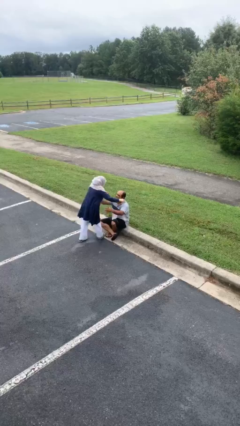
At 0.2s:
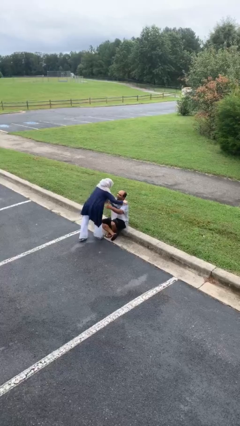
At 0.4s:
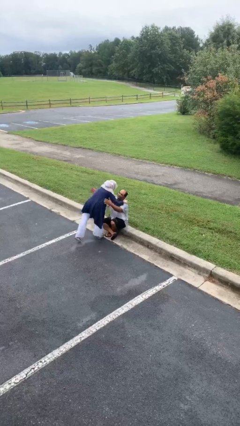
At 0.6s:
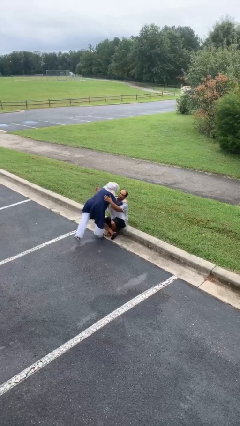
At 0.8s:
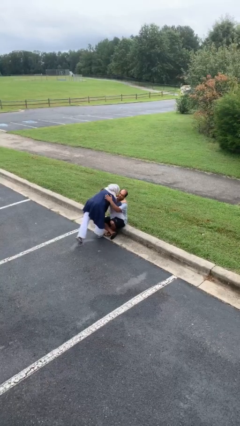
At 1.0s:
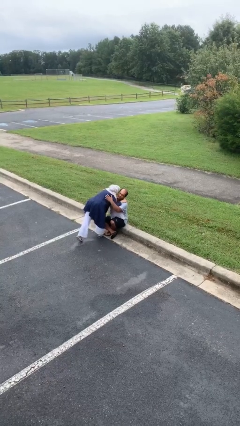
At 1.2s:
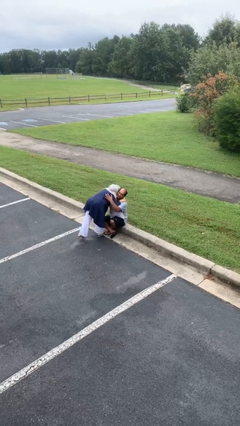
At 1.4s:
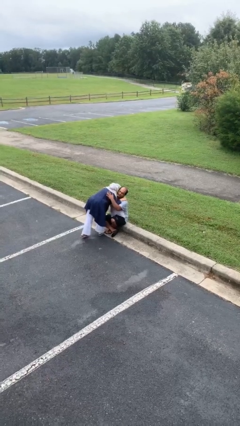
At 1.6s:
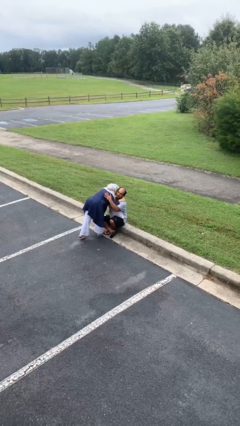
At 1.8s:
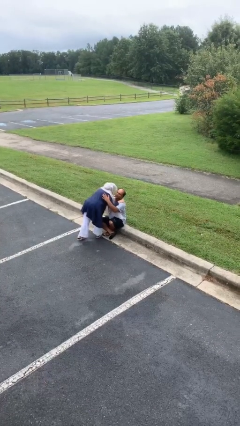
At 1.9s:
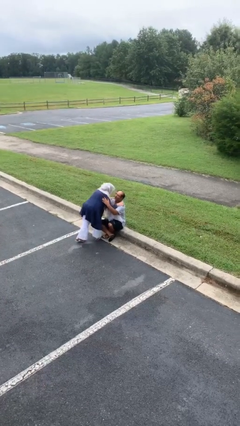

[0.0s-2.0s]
person embraces person

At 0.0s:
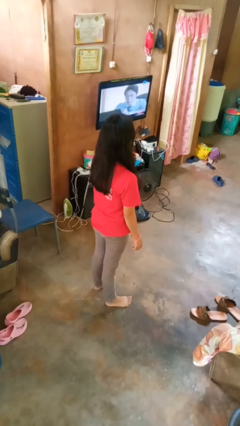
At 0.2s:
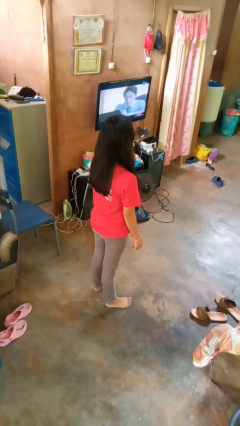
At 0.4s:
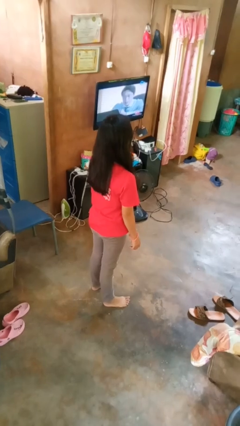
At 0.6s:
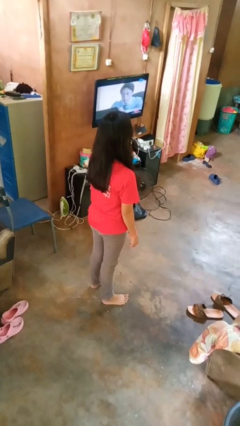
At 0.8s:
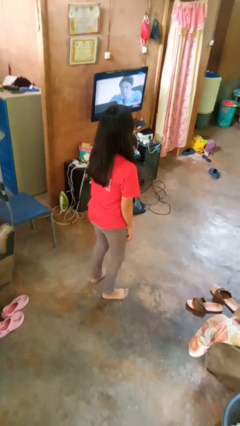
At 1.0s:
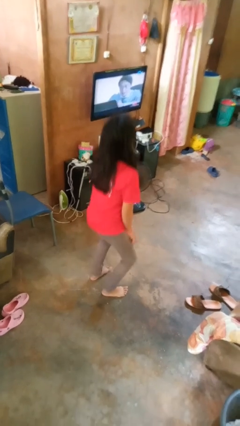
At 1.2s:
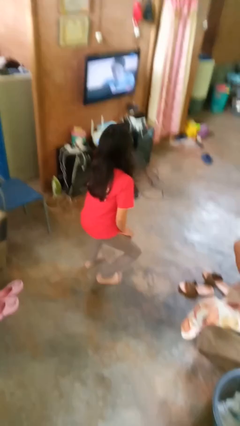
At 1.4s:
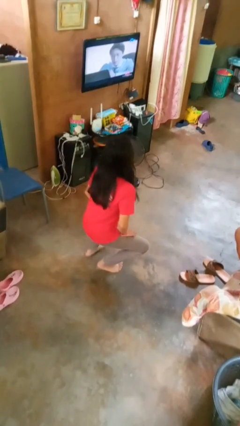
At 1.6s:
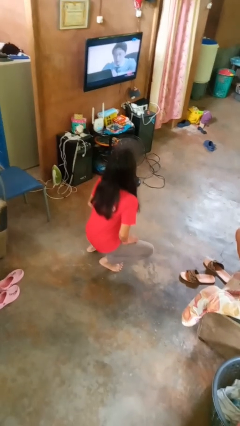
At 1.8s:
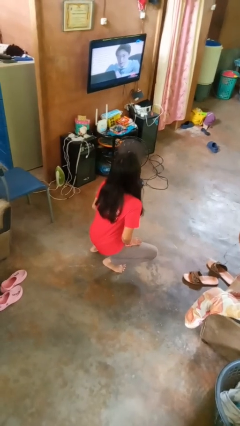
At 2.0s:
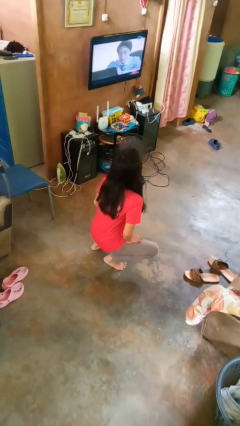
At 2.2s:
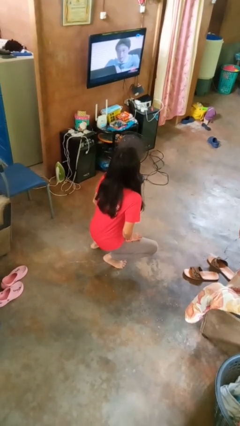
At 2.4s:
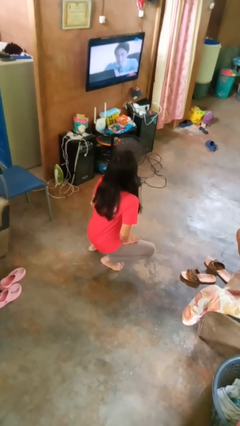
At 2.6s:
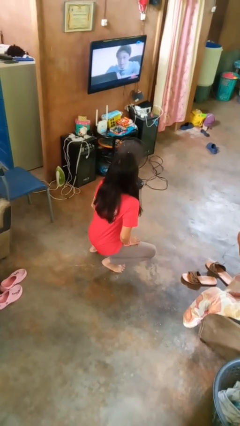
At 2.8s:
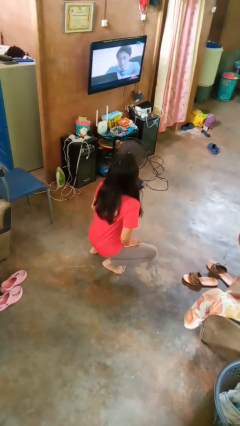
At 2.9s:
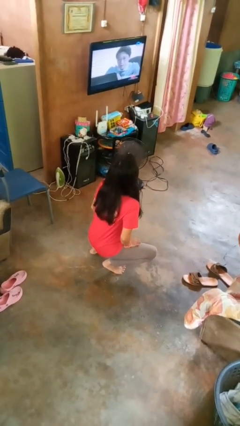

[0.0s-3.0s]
person squats

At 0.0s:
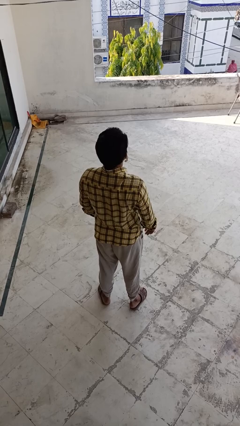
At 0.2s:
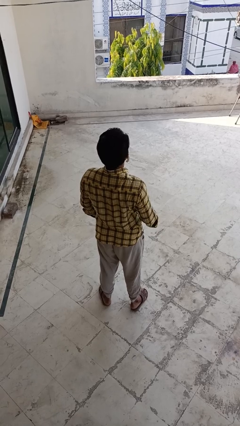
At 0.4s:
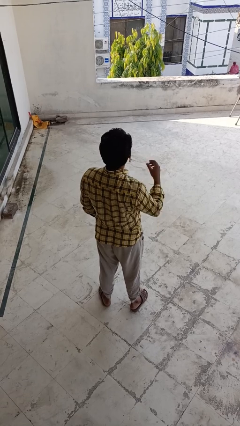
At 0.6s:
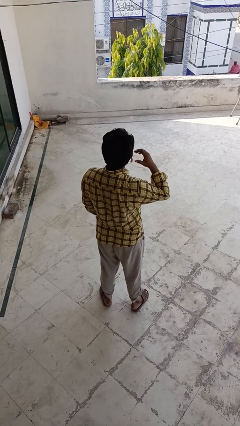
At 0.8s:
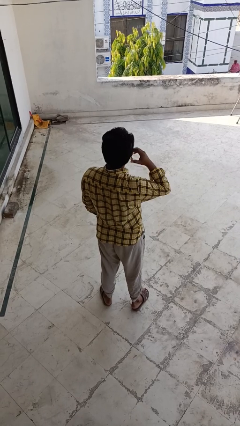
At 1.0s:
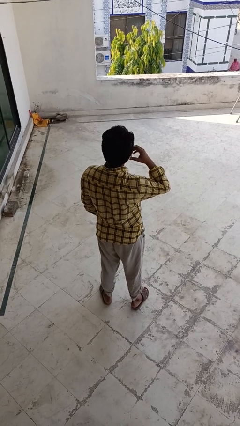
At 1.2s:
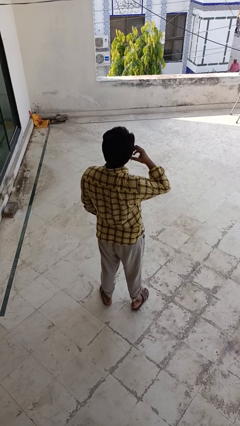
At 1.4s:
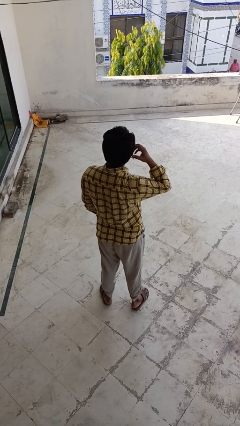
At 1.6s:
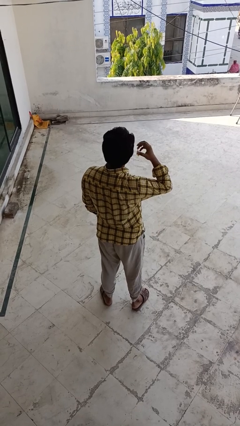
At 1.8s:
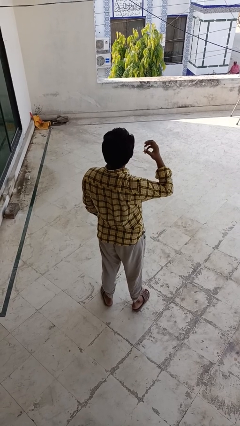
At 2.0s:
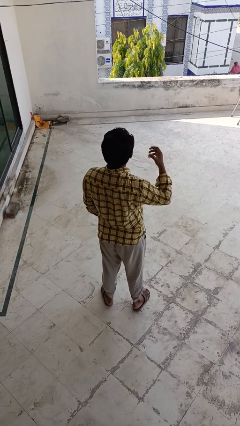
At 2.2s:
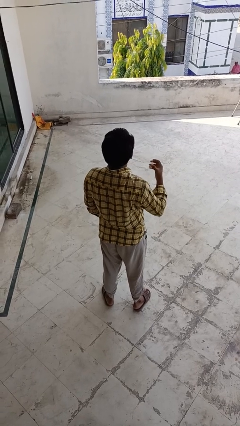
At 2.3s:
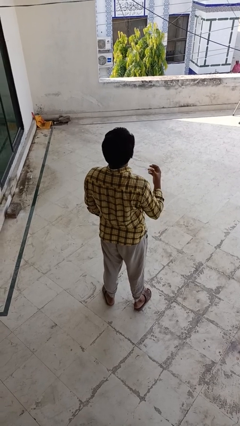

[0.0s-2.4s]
person takes off earrings

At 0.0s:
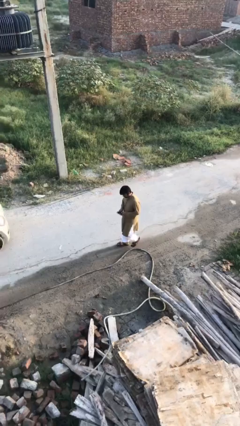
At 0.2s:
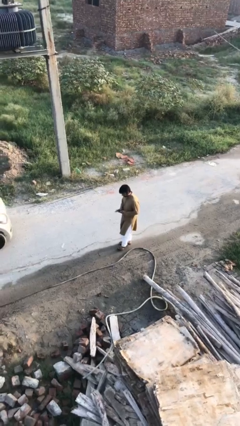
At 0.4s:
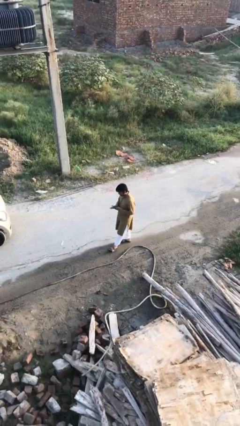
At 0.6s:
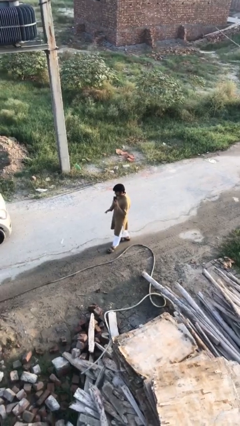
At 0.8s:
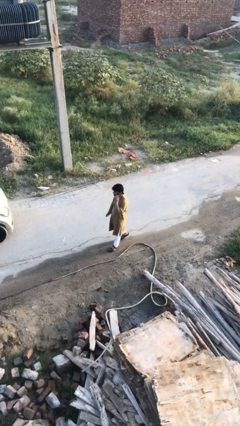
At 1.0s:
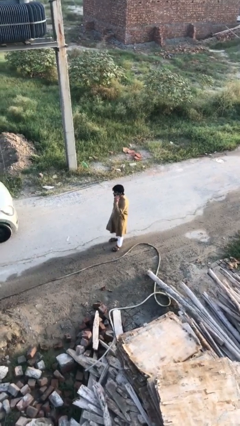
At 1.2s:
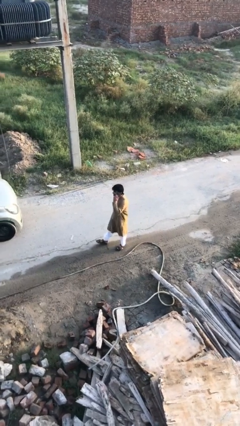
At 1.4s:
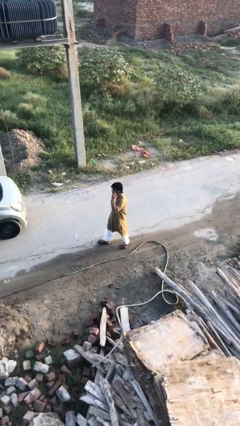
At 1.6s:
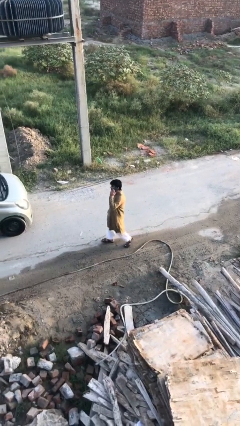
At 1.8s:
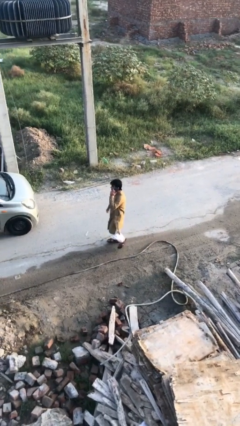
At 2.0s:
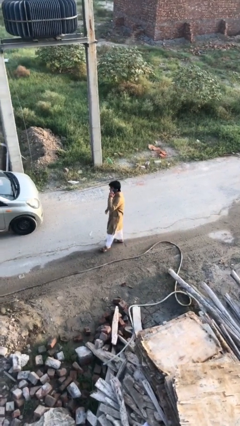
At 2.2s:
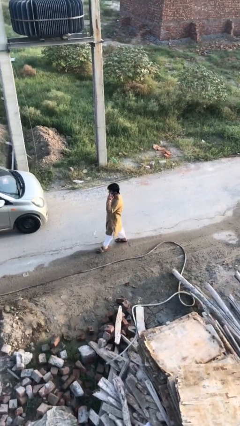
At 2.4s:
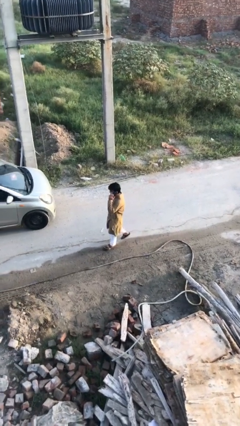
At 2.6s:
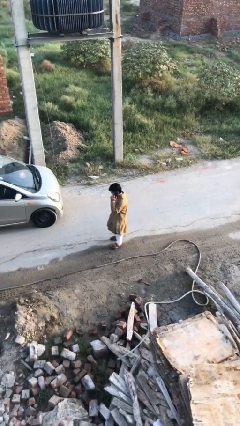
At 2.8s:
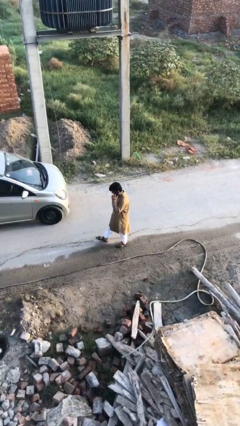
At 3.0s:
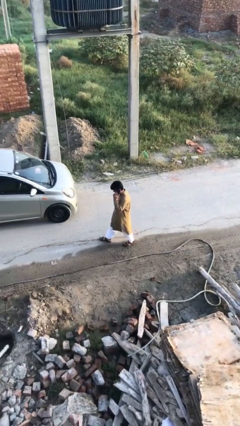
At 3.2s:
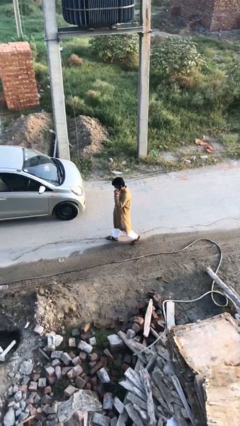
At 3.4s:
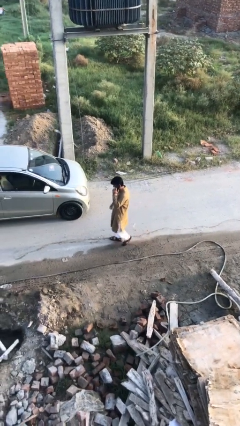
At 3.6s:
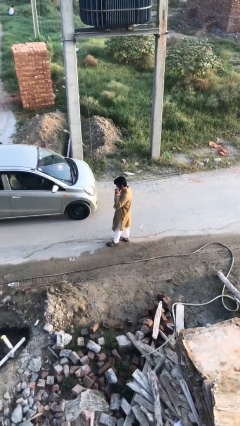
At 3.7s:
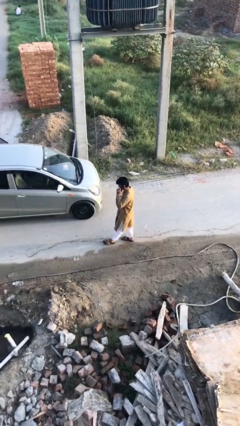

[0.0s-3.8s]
person talks on phone

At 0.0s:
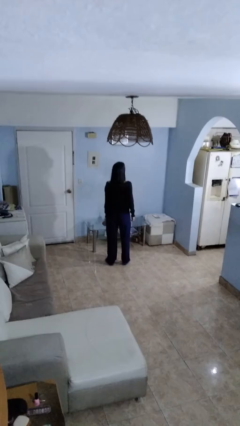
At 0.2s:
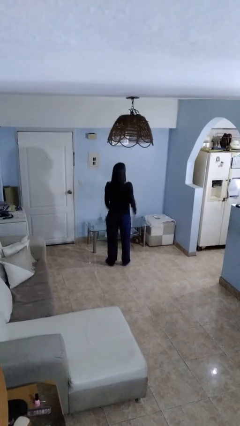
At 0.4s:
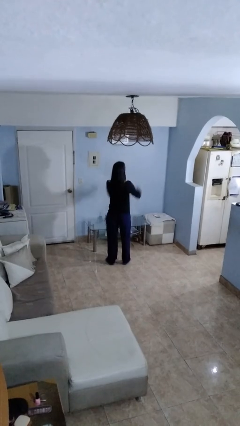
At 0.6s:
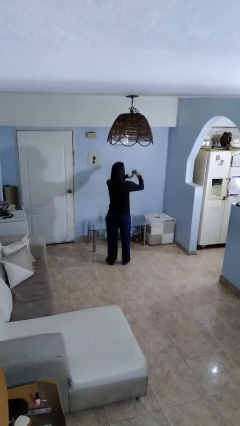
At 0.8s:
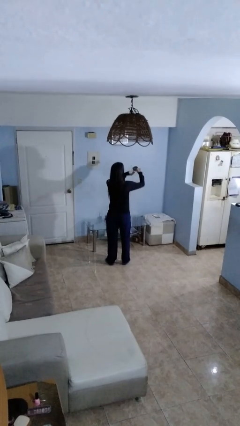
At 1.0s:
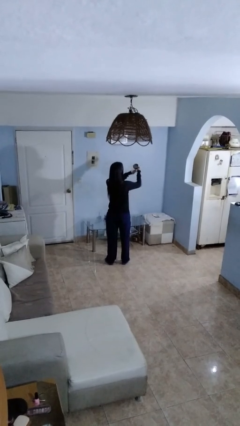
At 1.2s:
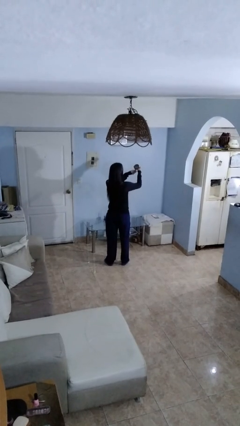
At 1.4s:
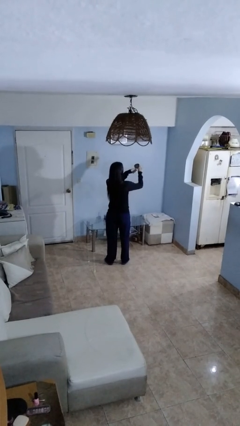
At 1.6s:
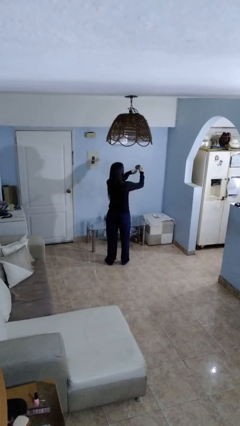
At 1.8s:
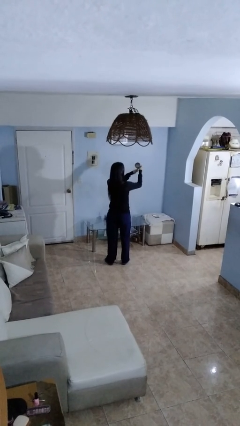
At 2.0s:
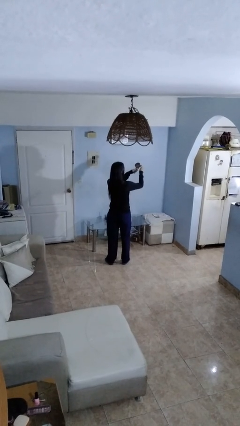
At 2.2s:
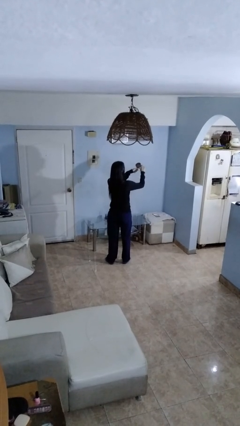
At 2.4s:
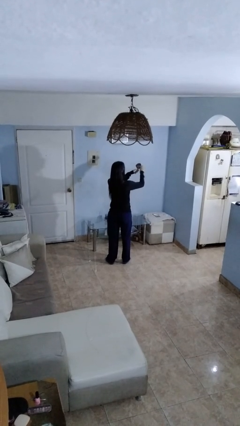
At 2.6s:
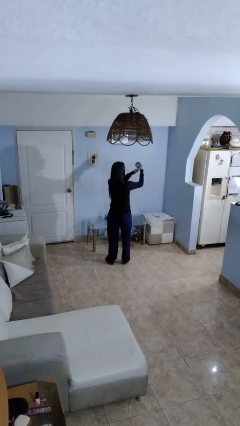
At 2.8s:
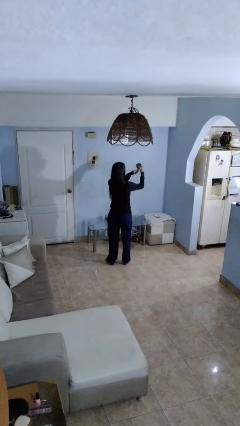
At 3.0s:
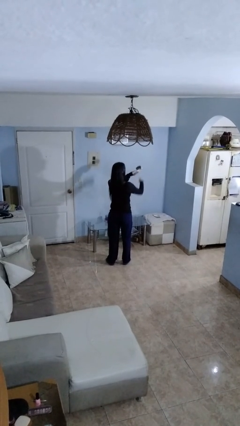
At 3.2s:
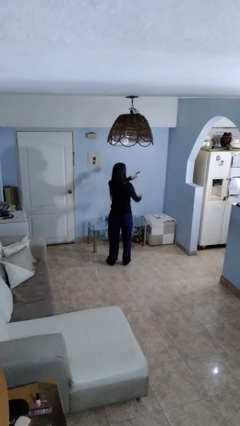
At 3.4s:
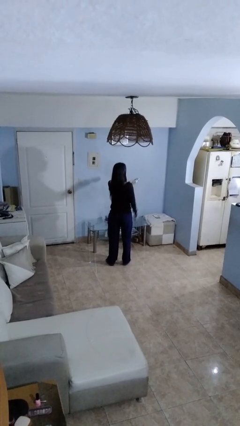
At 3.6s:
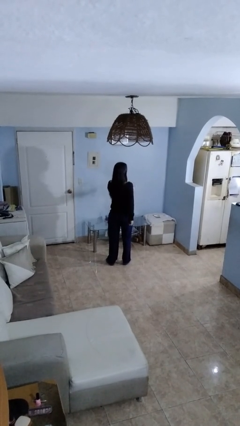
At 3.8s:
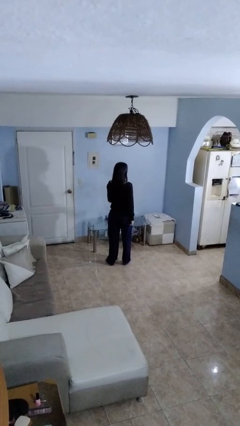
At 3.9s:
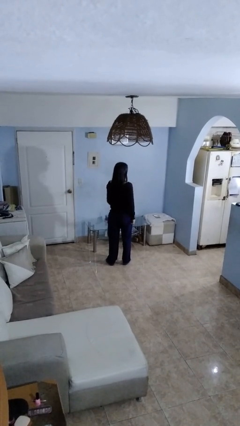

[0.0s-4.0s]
person opens can with can opener

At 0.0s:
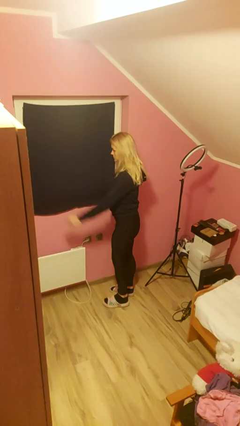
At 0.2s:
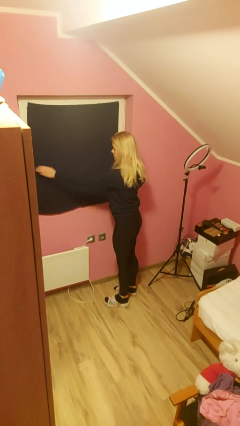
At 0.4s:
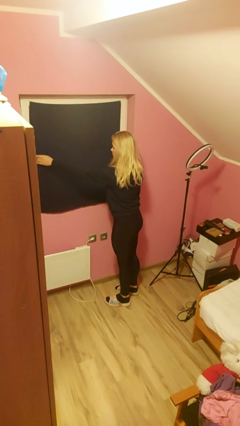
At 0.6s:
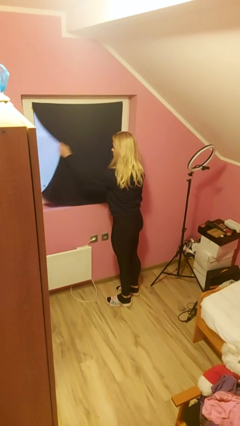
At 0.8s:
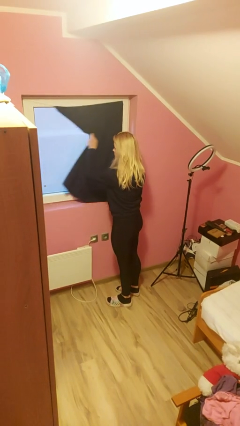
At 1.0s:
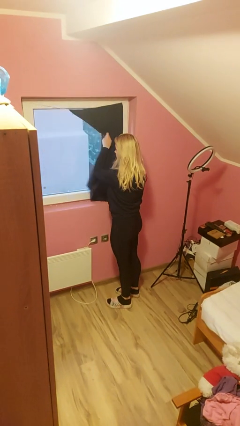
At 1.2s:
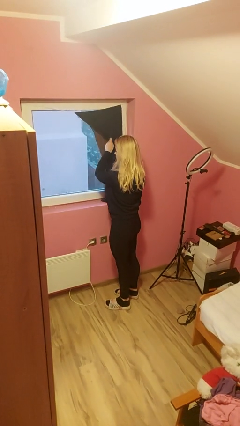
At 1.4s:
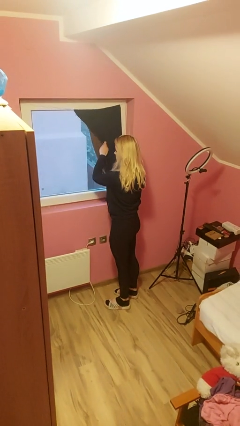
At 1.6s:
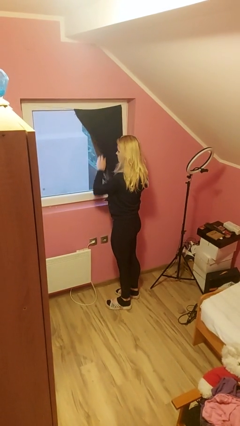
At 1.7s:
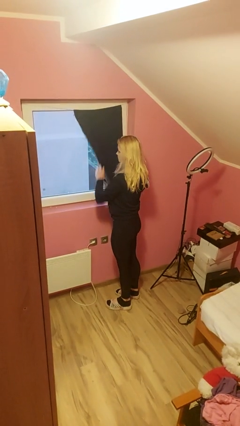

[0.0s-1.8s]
person opens curtains

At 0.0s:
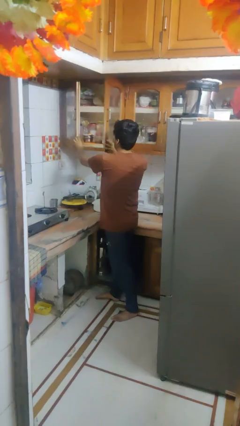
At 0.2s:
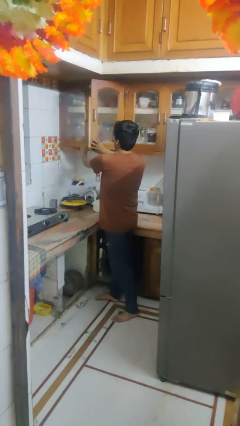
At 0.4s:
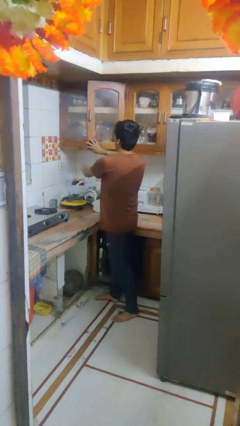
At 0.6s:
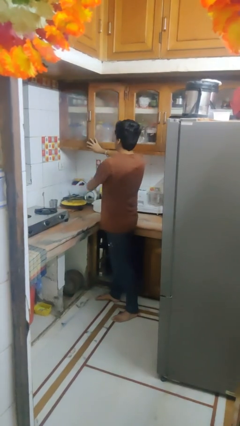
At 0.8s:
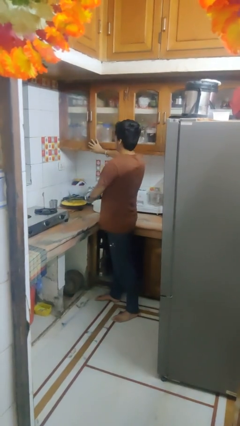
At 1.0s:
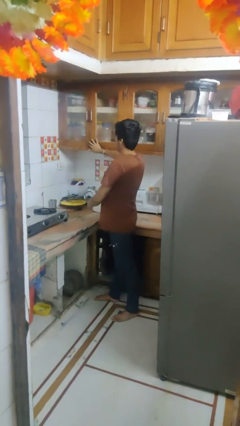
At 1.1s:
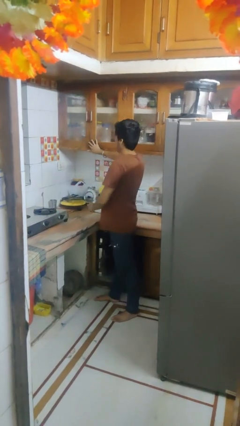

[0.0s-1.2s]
person closes cabinet
